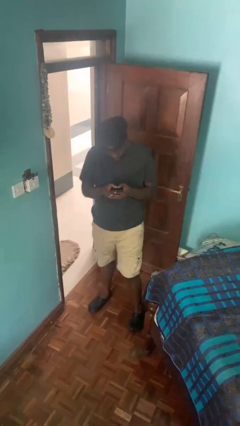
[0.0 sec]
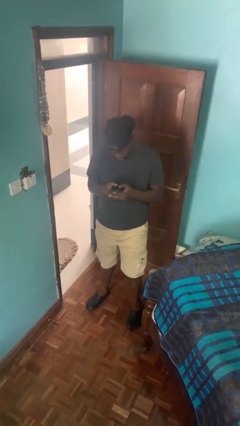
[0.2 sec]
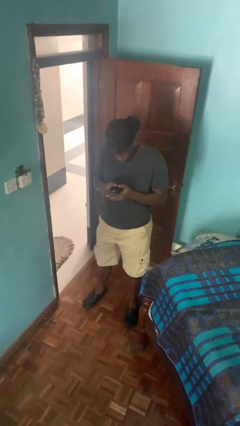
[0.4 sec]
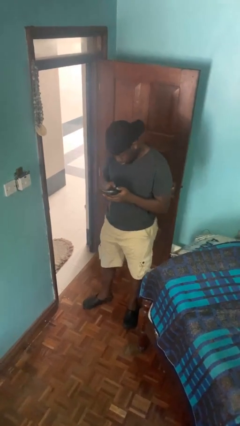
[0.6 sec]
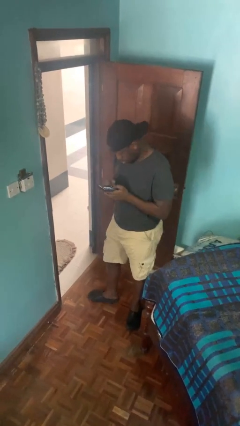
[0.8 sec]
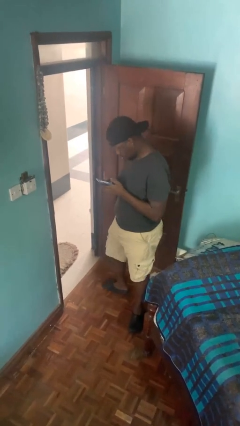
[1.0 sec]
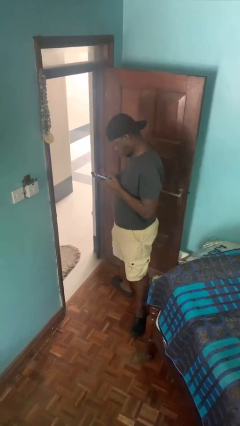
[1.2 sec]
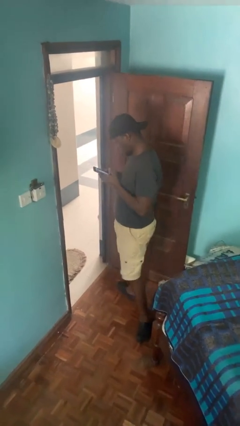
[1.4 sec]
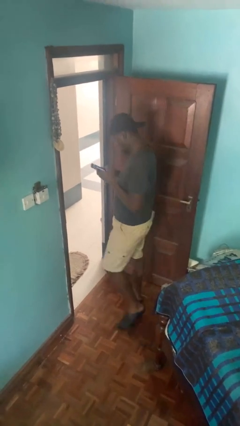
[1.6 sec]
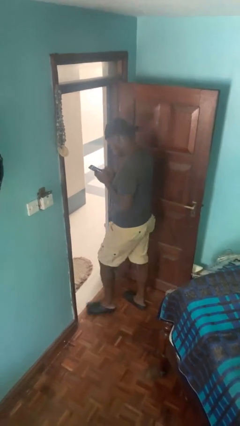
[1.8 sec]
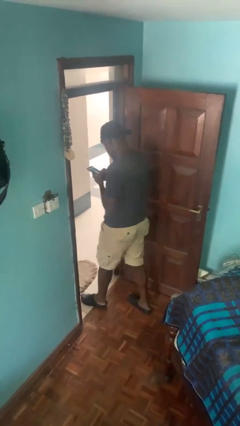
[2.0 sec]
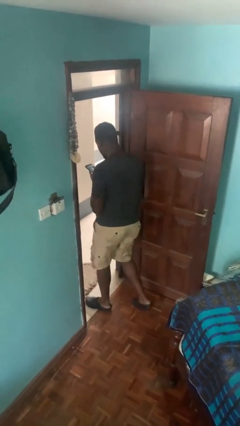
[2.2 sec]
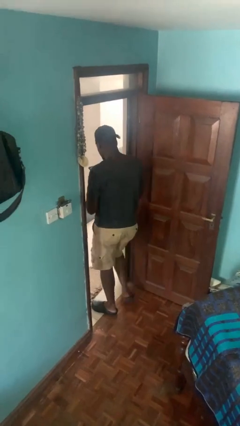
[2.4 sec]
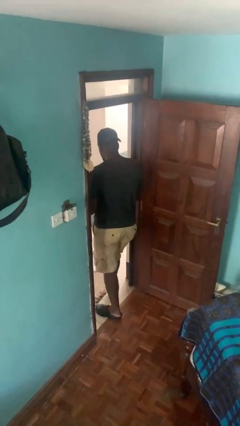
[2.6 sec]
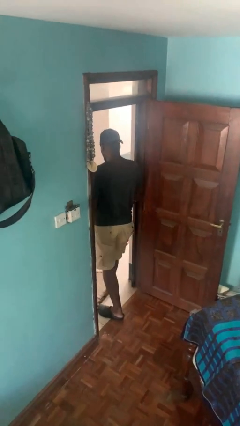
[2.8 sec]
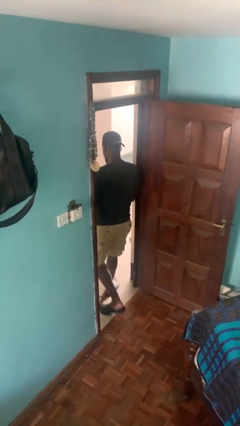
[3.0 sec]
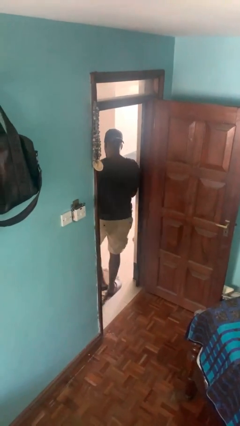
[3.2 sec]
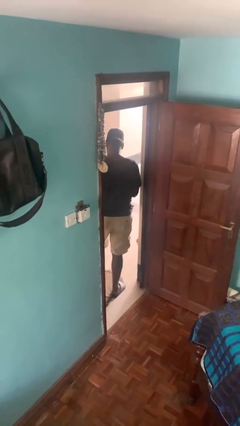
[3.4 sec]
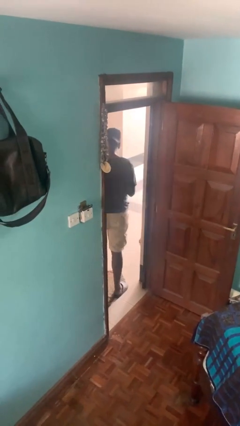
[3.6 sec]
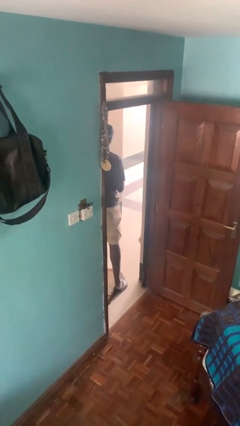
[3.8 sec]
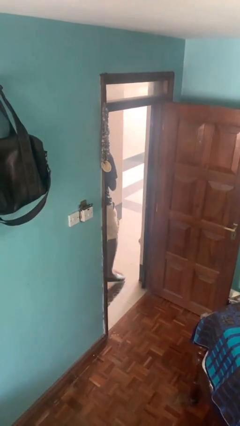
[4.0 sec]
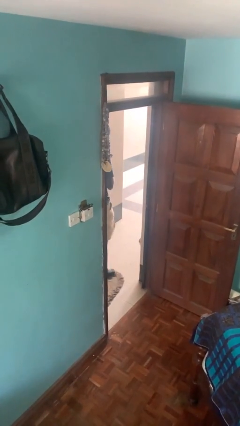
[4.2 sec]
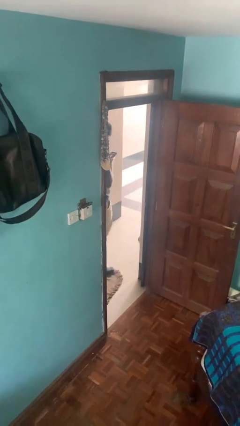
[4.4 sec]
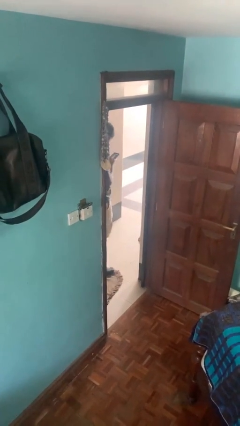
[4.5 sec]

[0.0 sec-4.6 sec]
person exits scene through structure

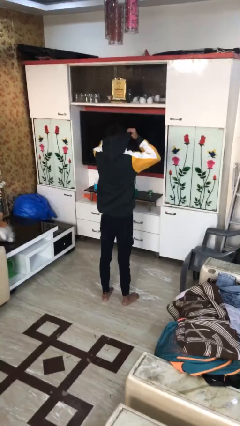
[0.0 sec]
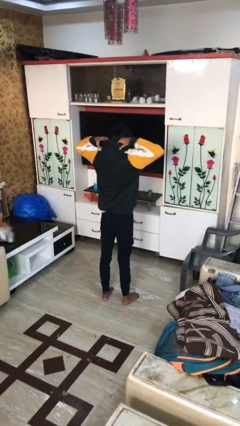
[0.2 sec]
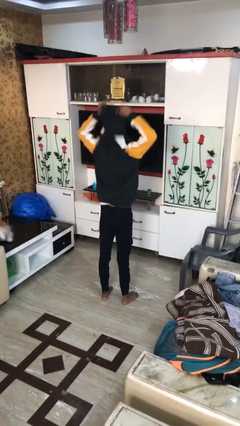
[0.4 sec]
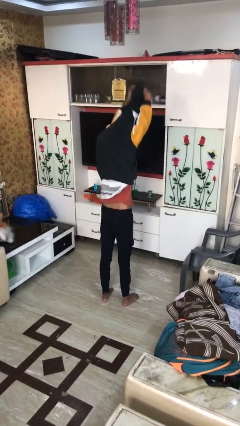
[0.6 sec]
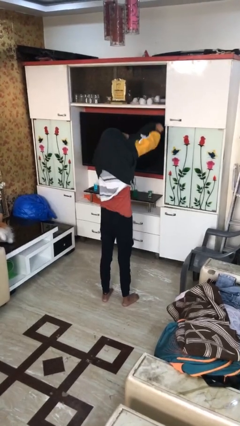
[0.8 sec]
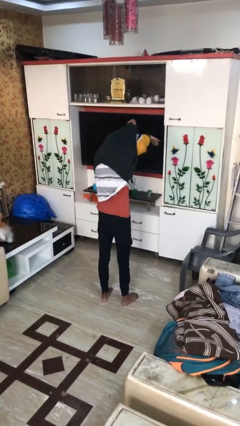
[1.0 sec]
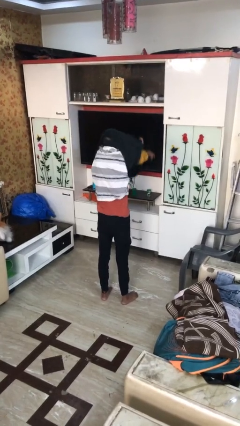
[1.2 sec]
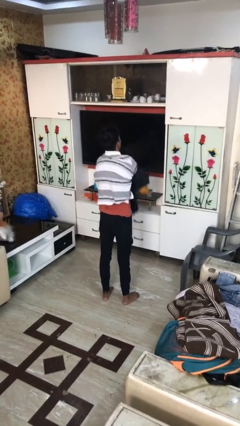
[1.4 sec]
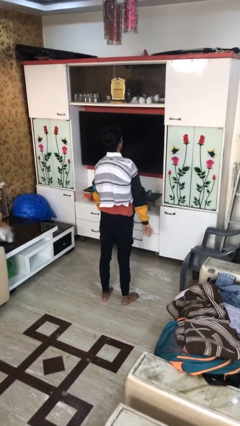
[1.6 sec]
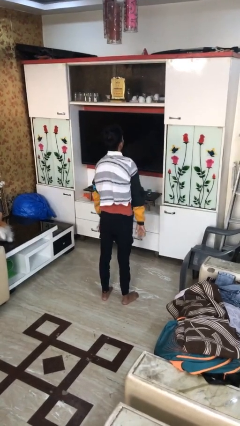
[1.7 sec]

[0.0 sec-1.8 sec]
person takes off hoodie

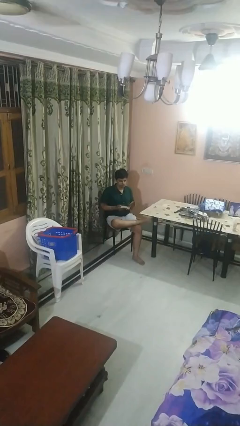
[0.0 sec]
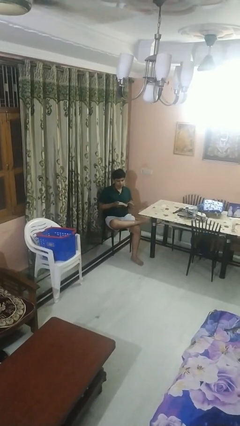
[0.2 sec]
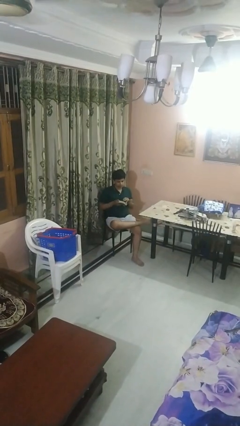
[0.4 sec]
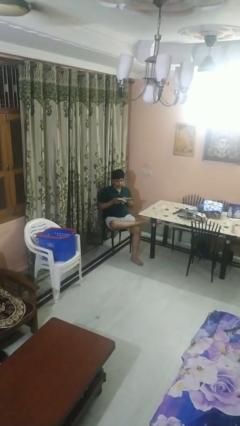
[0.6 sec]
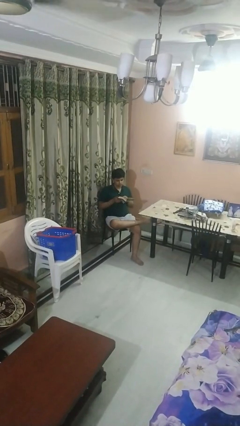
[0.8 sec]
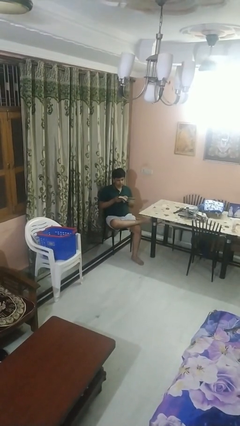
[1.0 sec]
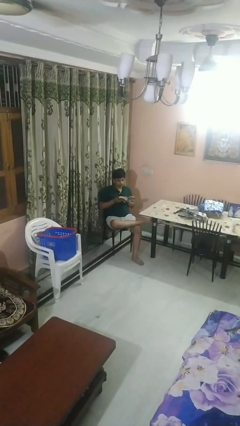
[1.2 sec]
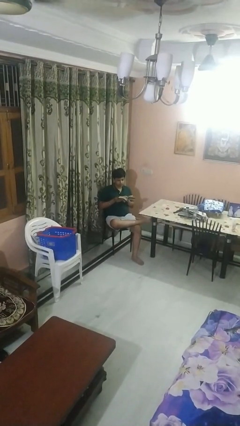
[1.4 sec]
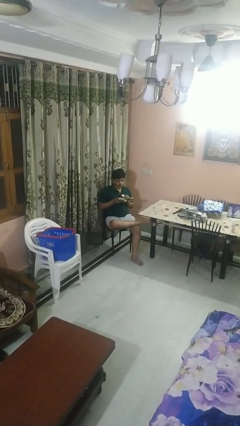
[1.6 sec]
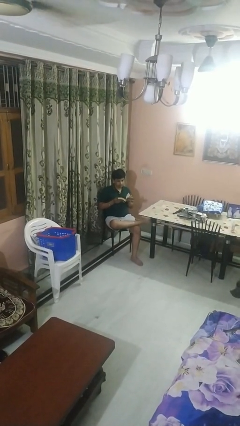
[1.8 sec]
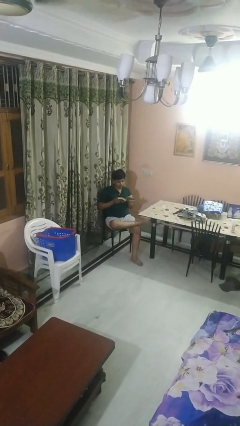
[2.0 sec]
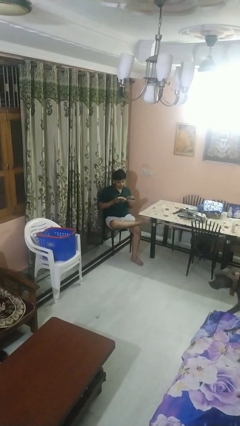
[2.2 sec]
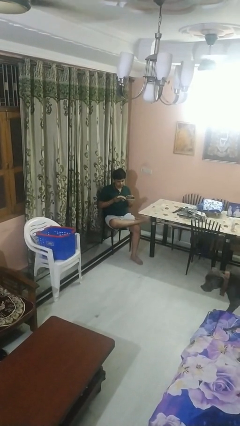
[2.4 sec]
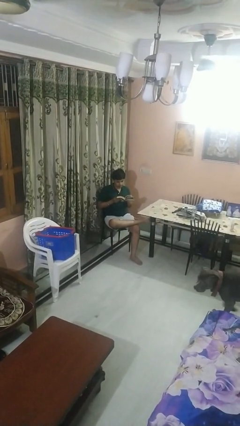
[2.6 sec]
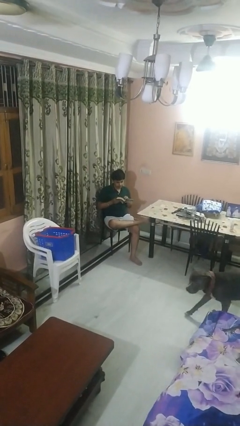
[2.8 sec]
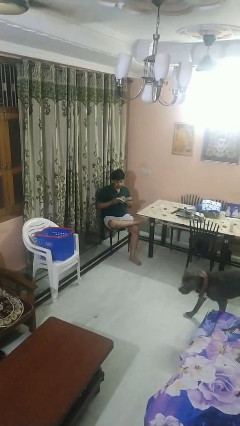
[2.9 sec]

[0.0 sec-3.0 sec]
person reads book

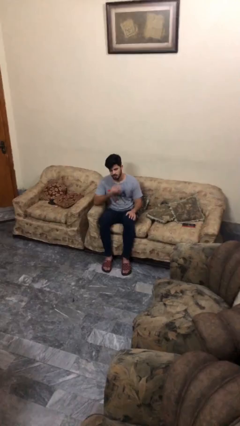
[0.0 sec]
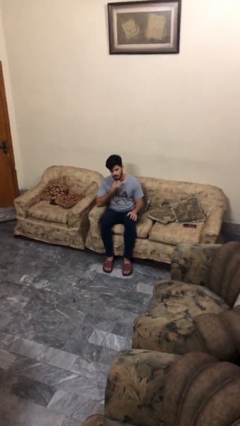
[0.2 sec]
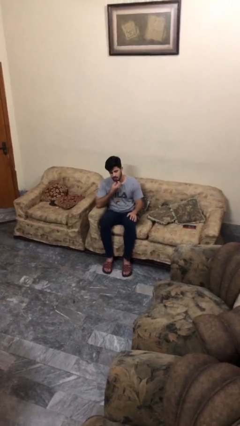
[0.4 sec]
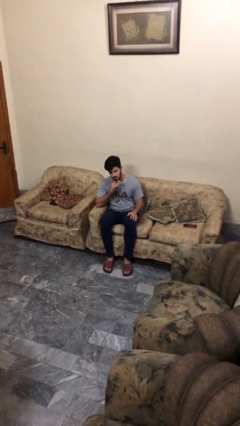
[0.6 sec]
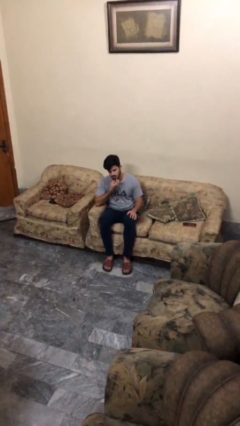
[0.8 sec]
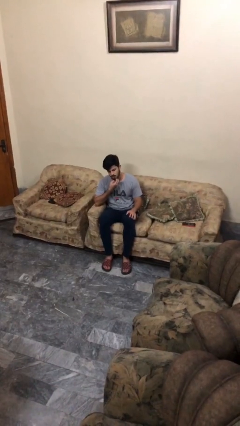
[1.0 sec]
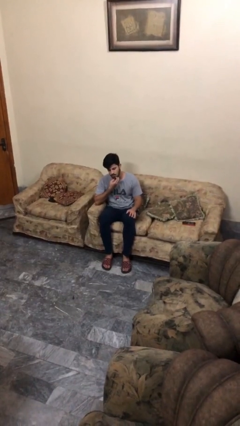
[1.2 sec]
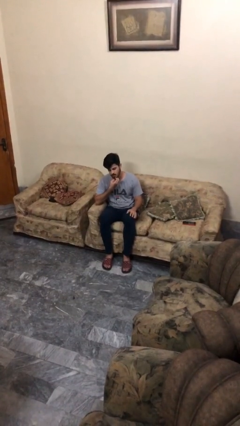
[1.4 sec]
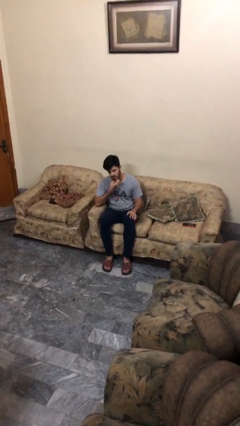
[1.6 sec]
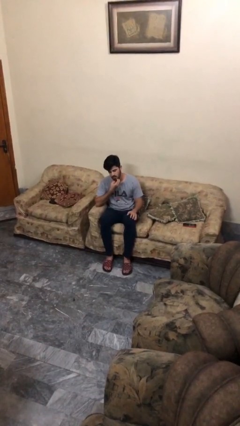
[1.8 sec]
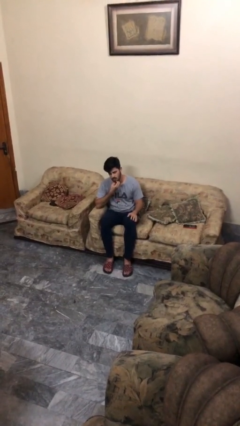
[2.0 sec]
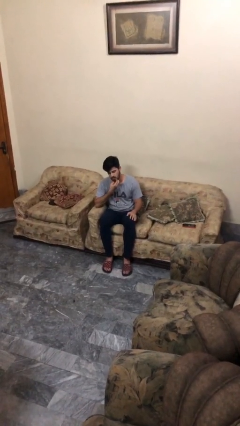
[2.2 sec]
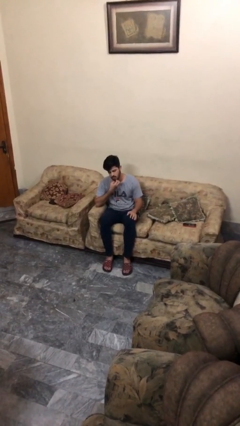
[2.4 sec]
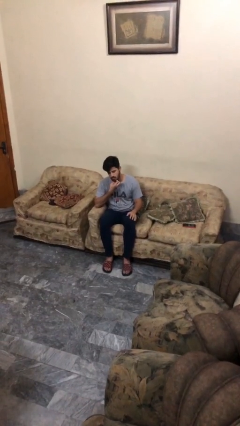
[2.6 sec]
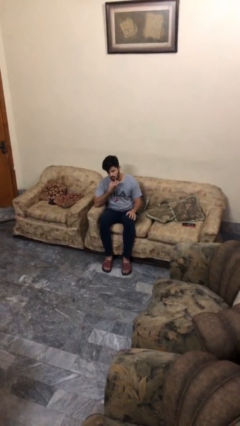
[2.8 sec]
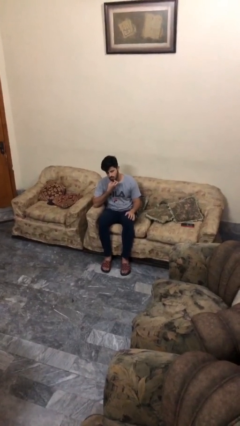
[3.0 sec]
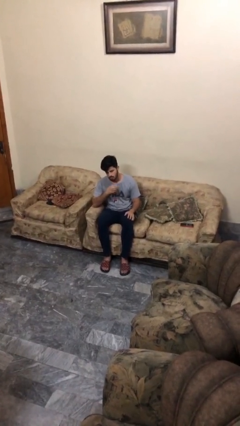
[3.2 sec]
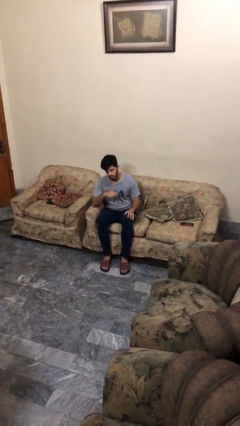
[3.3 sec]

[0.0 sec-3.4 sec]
person scratches face

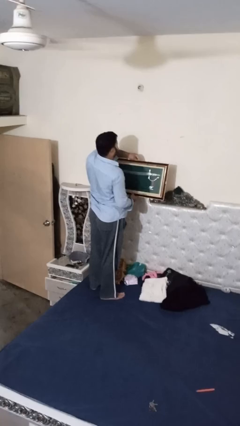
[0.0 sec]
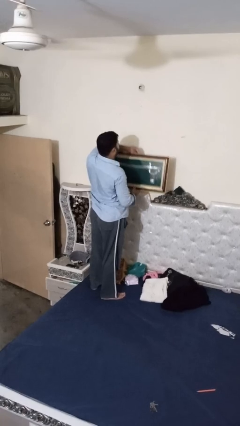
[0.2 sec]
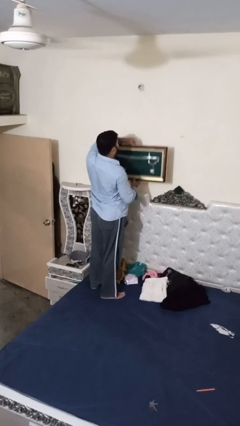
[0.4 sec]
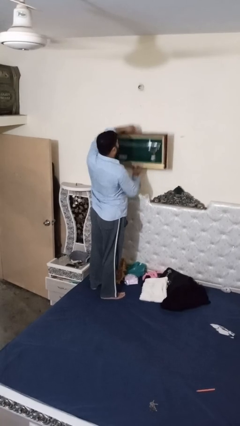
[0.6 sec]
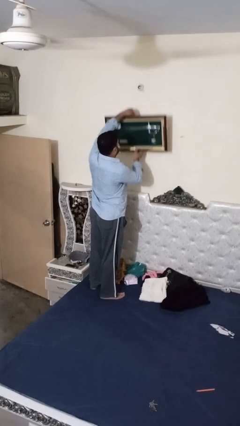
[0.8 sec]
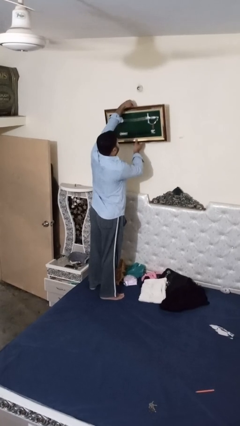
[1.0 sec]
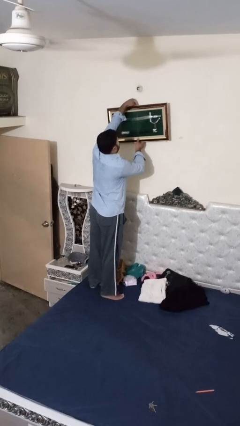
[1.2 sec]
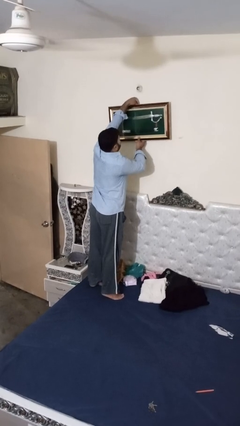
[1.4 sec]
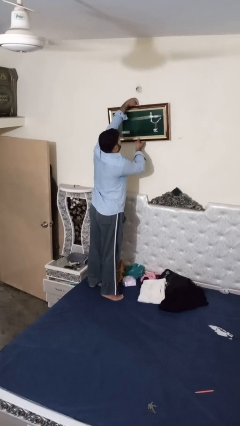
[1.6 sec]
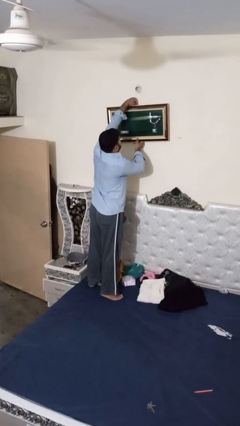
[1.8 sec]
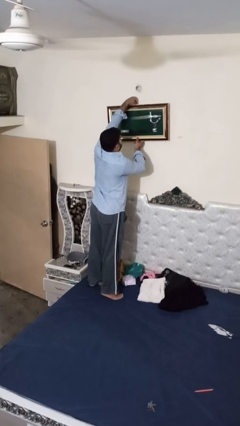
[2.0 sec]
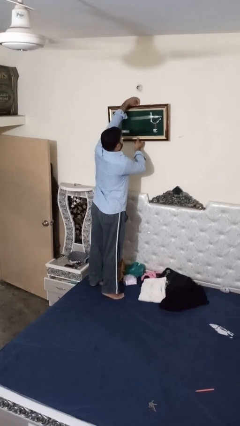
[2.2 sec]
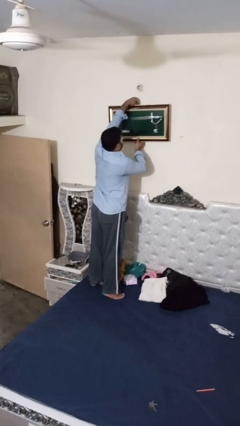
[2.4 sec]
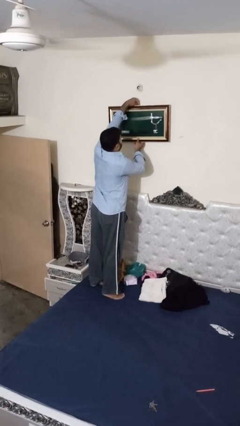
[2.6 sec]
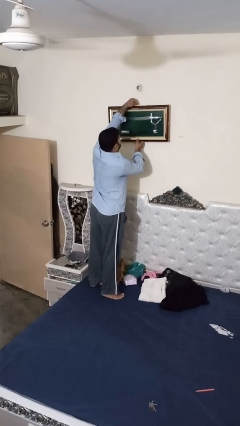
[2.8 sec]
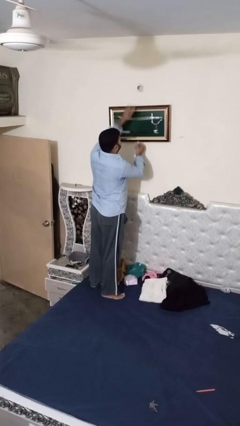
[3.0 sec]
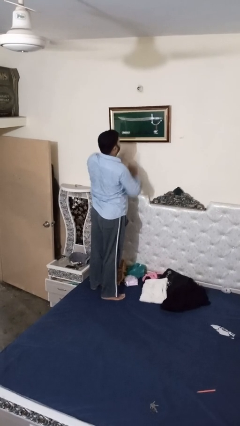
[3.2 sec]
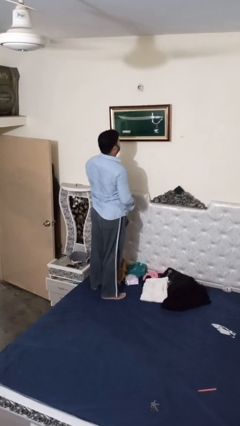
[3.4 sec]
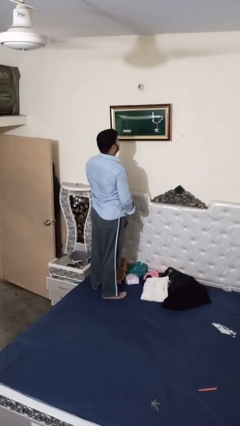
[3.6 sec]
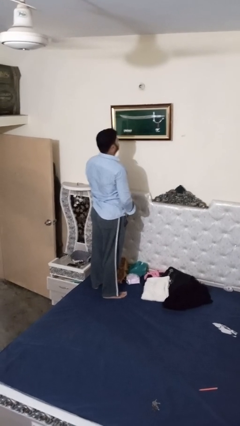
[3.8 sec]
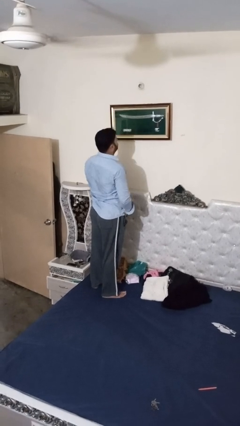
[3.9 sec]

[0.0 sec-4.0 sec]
person puts up picture frame

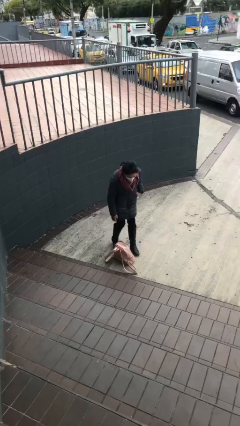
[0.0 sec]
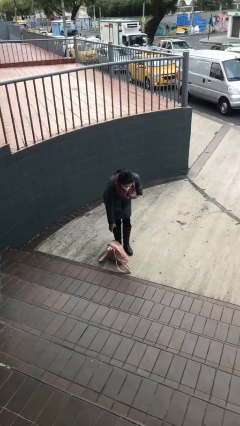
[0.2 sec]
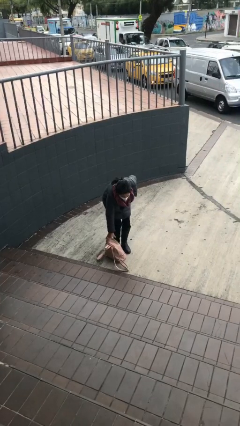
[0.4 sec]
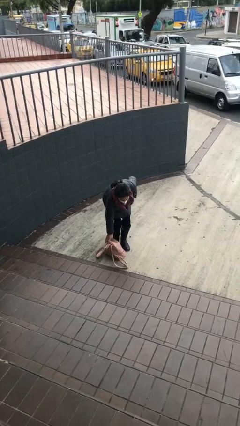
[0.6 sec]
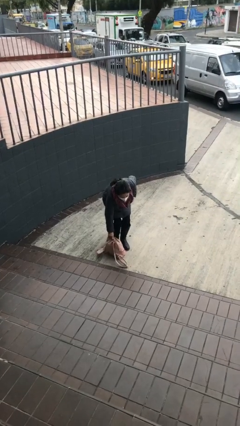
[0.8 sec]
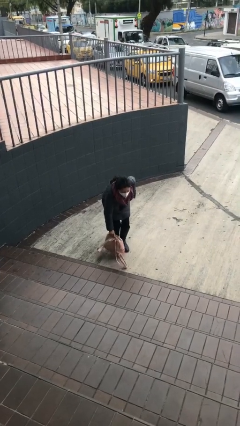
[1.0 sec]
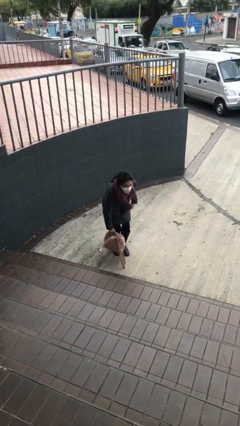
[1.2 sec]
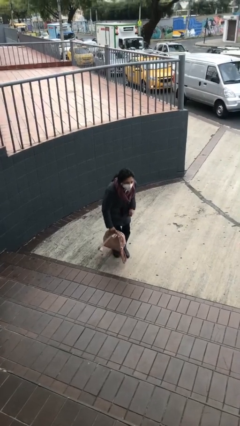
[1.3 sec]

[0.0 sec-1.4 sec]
person picks up object from floor
